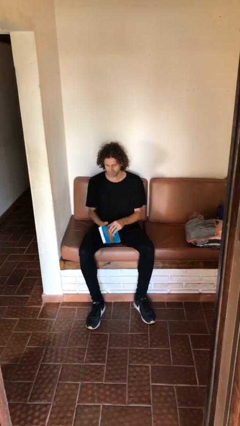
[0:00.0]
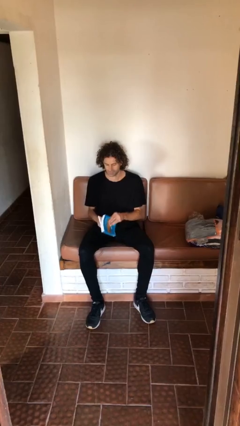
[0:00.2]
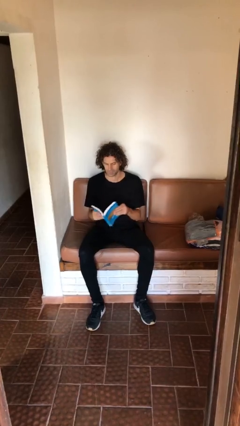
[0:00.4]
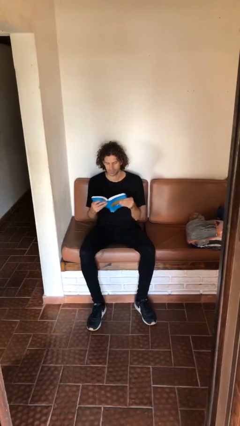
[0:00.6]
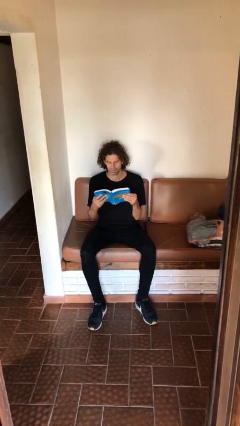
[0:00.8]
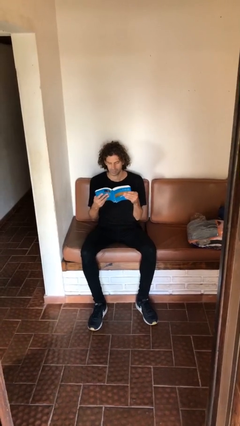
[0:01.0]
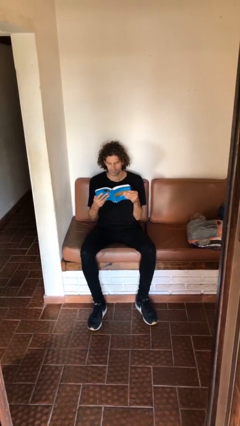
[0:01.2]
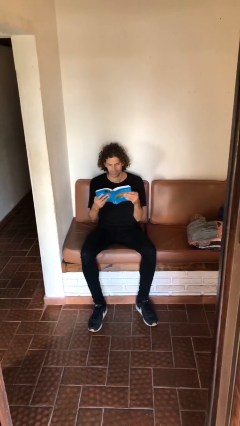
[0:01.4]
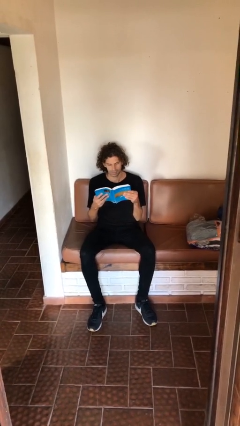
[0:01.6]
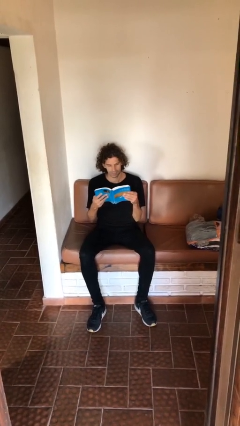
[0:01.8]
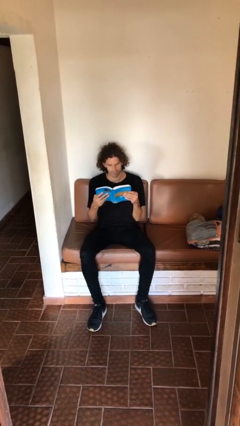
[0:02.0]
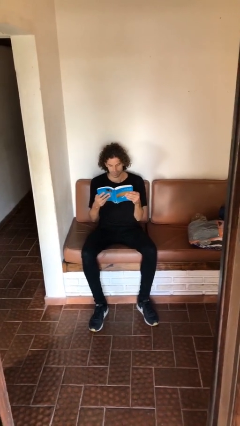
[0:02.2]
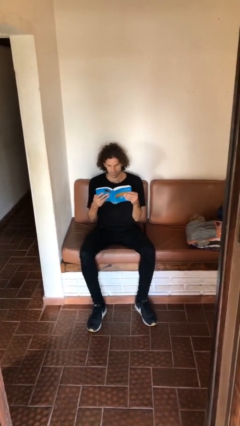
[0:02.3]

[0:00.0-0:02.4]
person reads document

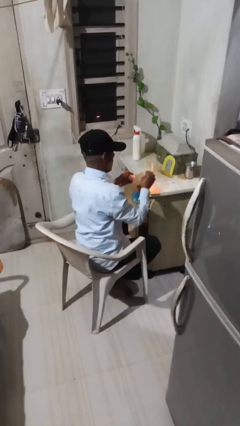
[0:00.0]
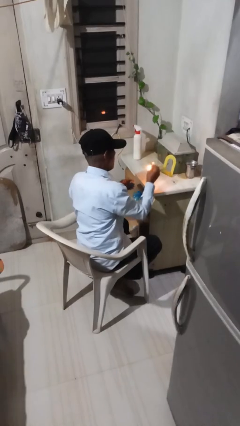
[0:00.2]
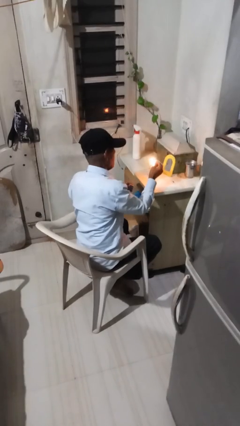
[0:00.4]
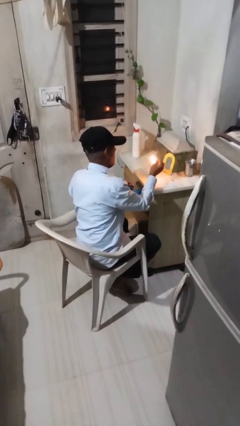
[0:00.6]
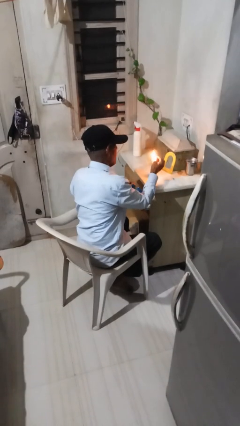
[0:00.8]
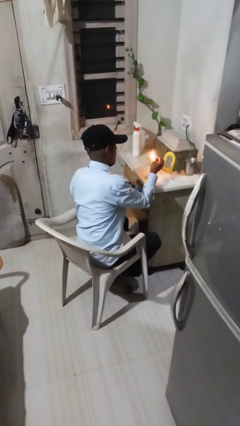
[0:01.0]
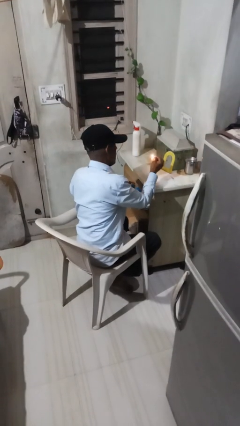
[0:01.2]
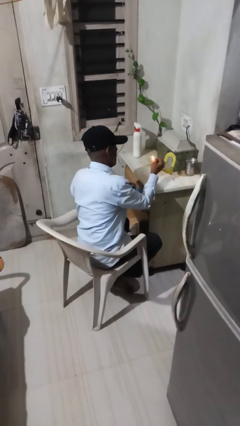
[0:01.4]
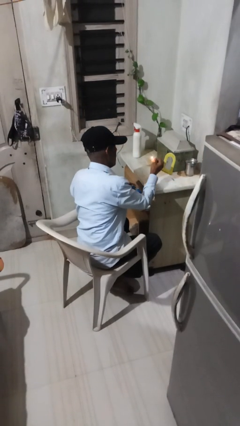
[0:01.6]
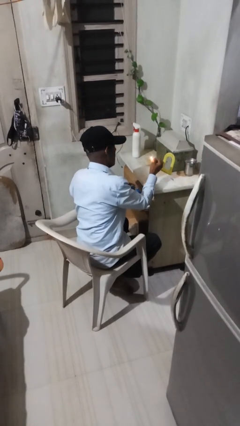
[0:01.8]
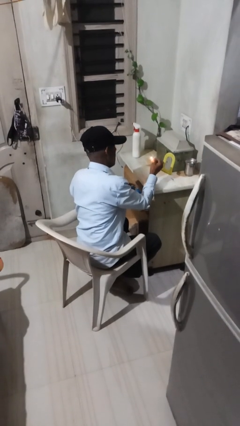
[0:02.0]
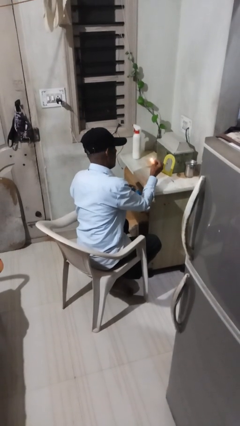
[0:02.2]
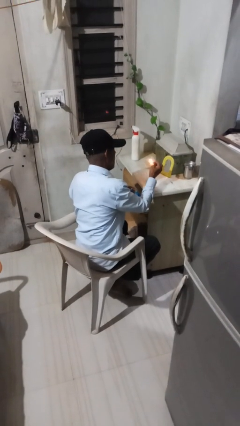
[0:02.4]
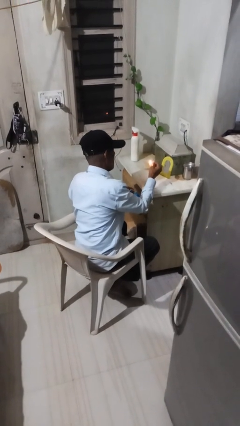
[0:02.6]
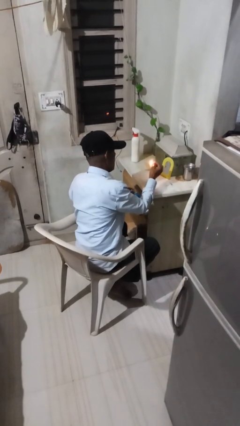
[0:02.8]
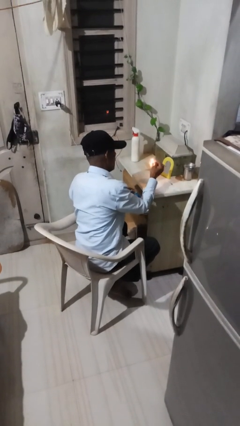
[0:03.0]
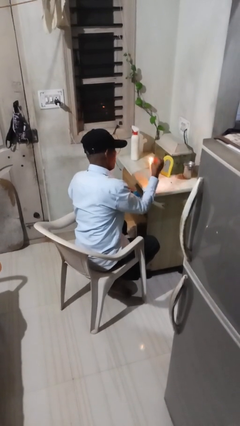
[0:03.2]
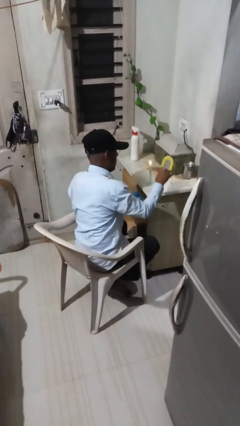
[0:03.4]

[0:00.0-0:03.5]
person lights candle

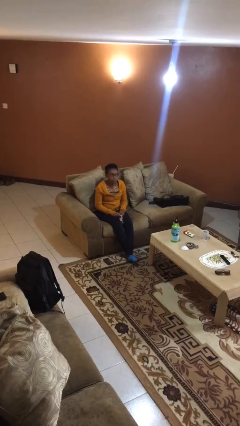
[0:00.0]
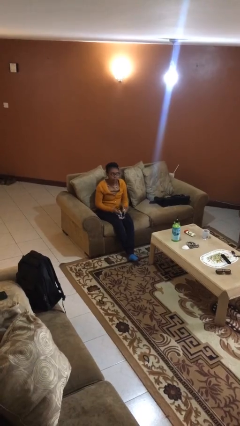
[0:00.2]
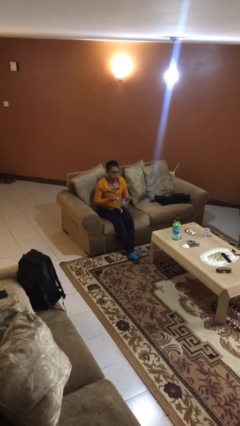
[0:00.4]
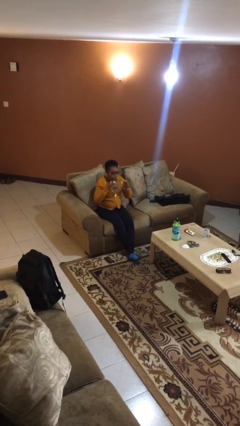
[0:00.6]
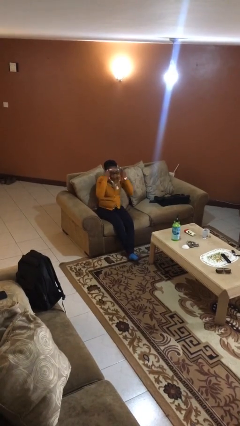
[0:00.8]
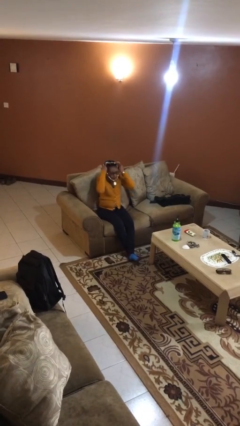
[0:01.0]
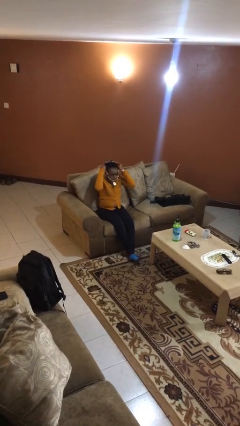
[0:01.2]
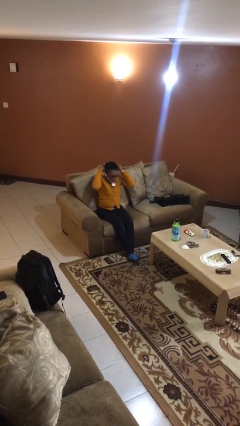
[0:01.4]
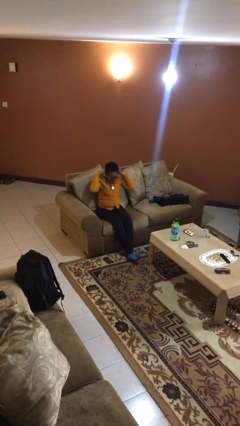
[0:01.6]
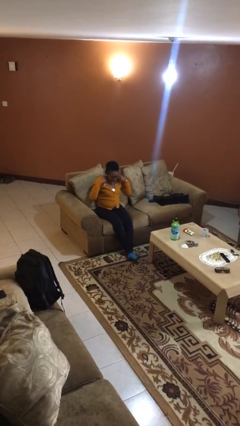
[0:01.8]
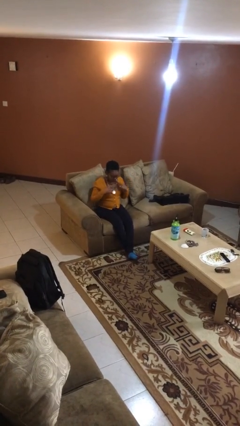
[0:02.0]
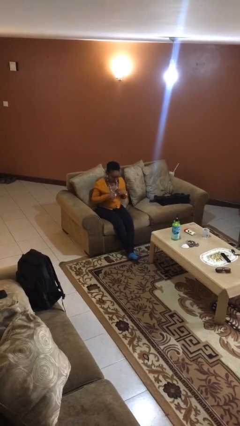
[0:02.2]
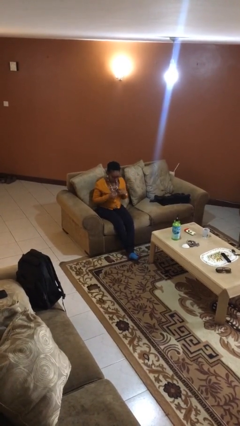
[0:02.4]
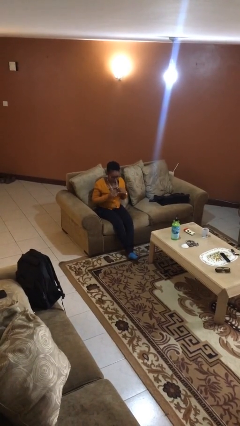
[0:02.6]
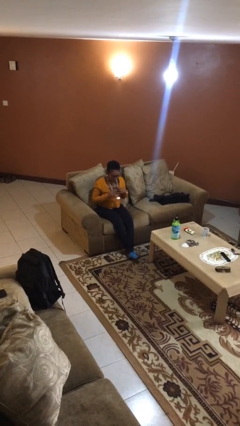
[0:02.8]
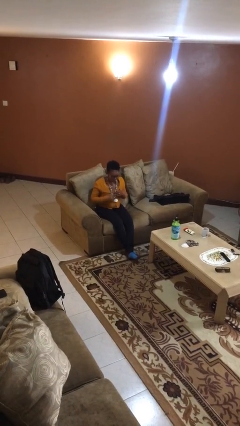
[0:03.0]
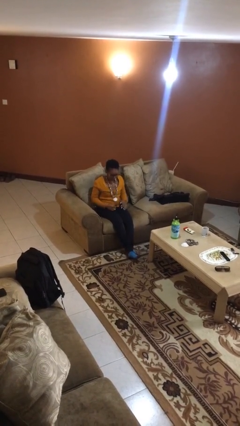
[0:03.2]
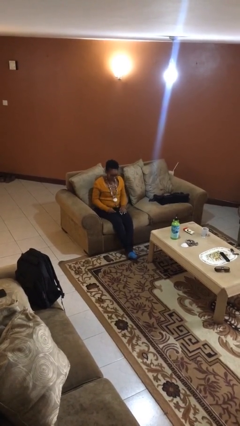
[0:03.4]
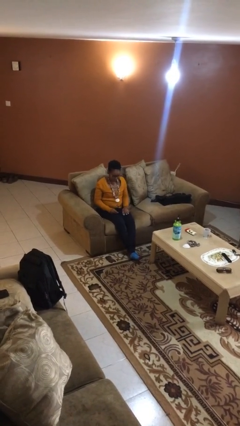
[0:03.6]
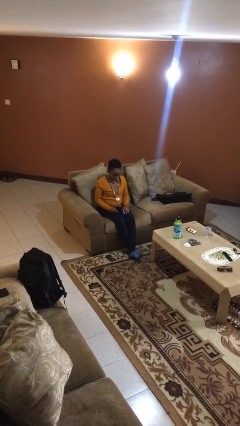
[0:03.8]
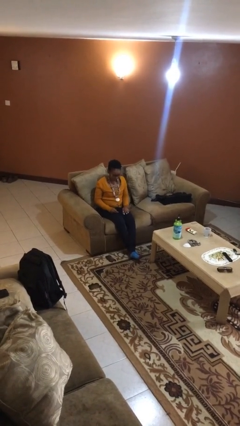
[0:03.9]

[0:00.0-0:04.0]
person puts on necklace

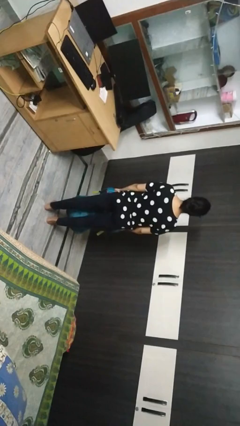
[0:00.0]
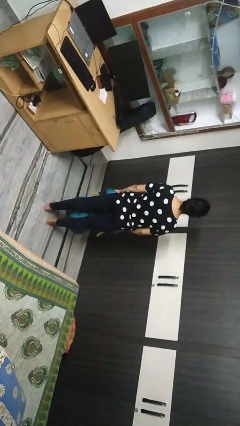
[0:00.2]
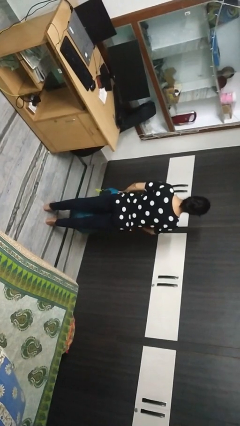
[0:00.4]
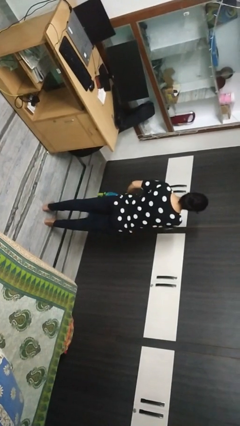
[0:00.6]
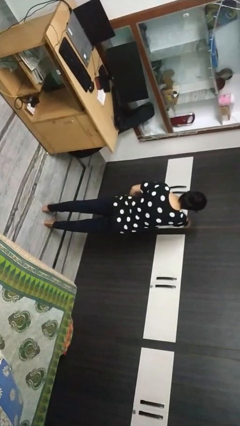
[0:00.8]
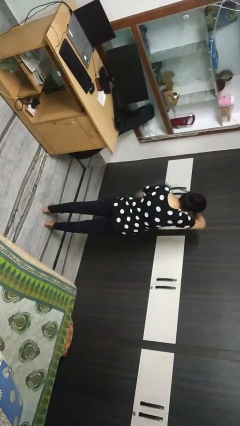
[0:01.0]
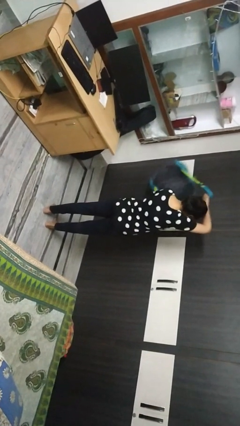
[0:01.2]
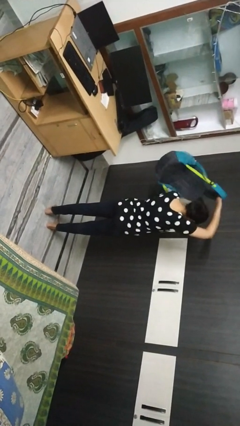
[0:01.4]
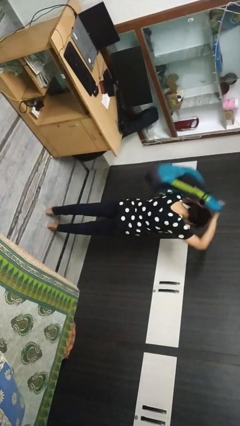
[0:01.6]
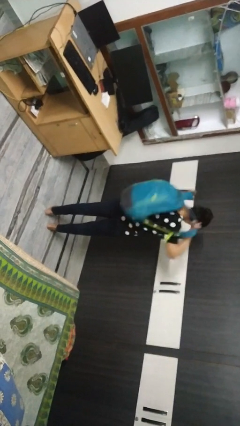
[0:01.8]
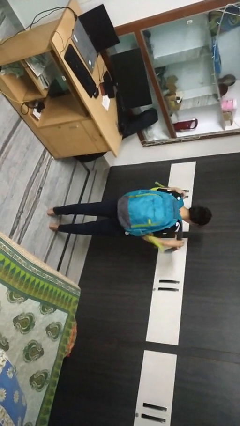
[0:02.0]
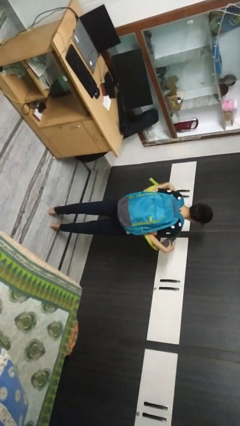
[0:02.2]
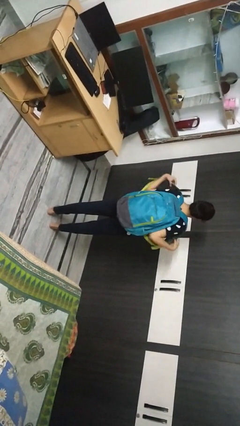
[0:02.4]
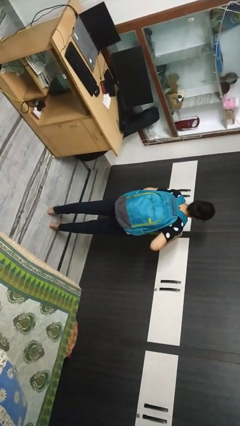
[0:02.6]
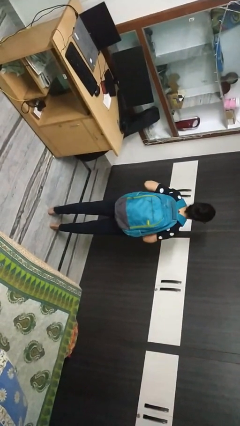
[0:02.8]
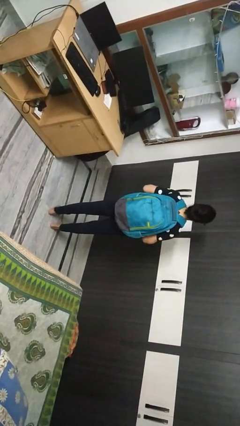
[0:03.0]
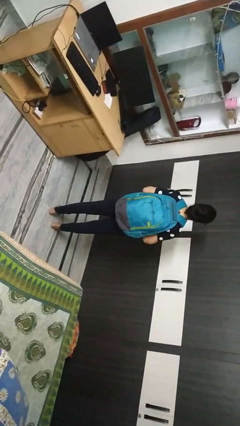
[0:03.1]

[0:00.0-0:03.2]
person puts on backpack

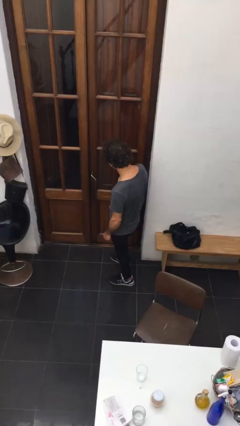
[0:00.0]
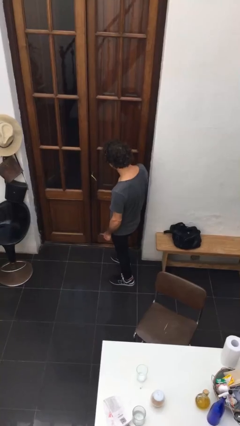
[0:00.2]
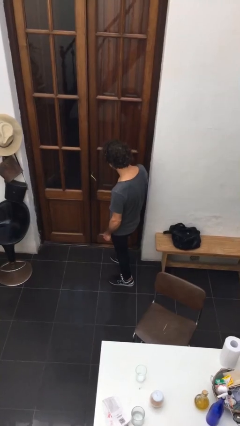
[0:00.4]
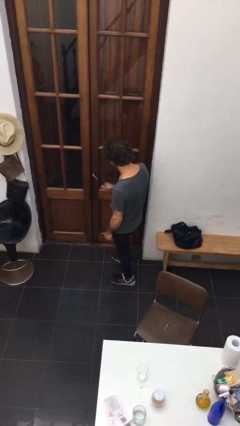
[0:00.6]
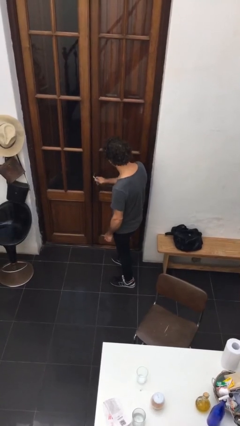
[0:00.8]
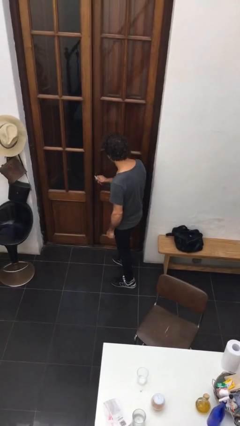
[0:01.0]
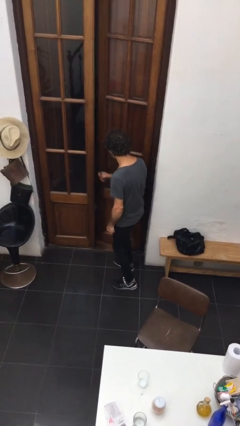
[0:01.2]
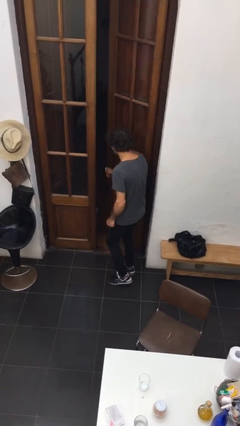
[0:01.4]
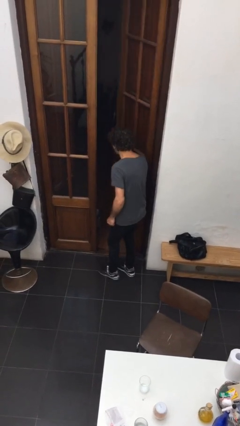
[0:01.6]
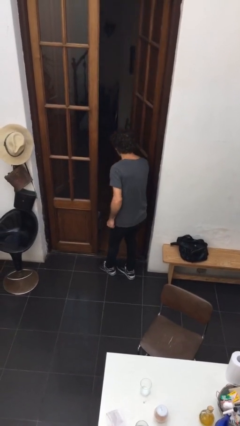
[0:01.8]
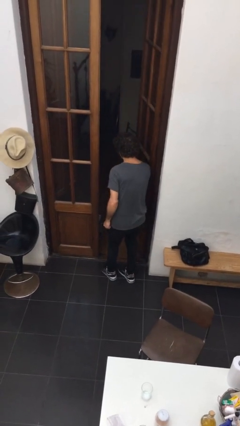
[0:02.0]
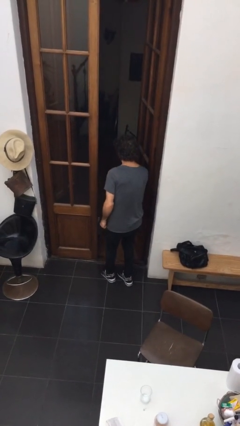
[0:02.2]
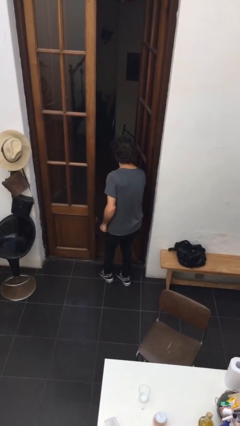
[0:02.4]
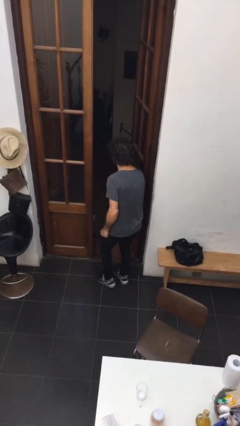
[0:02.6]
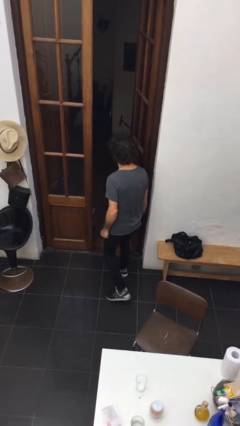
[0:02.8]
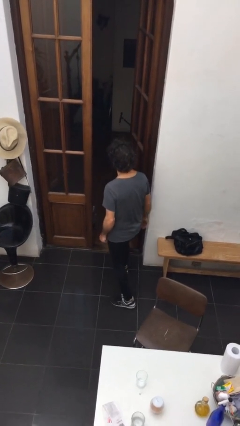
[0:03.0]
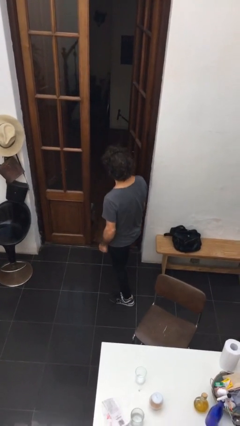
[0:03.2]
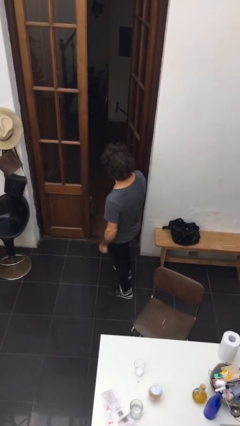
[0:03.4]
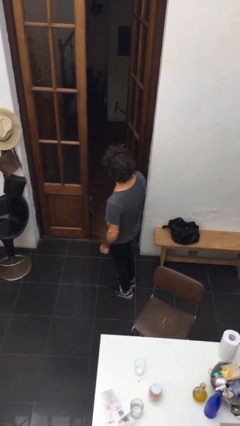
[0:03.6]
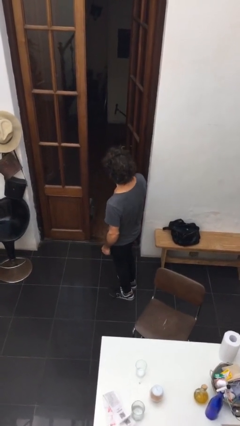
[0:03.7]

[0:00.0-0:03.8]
person opens facility door

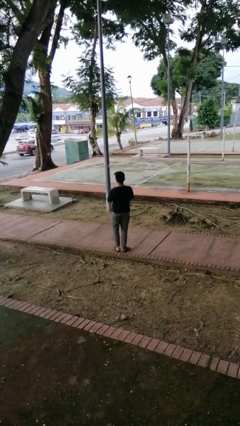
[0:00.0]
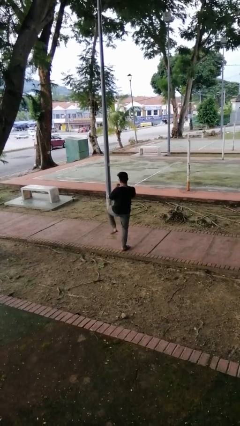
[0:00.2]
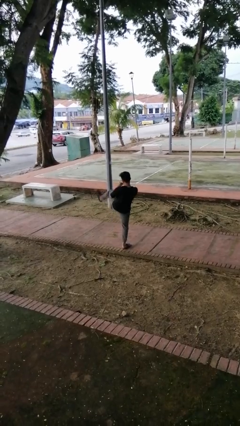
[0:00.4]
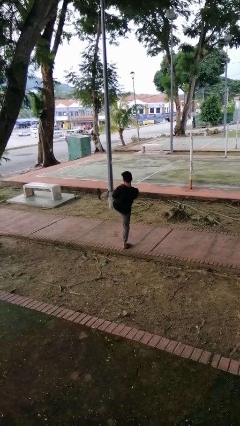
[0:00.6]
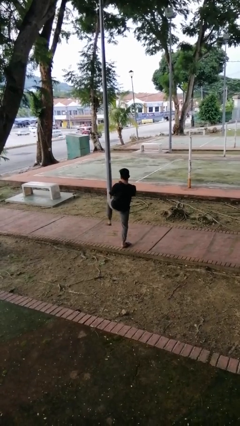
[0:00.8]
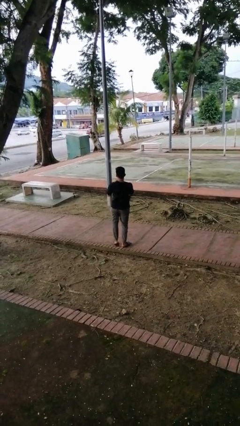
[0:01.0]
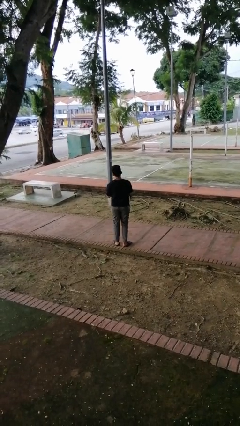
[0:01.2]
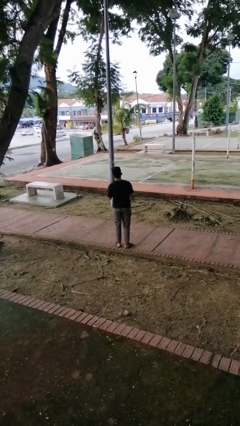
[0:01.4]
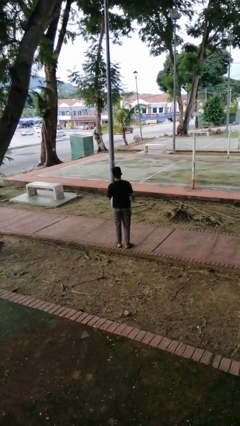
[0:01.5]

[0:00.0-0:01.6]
person karate kicks
